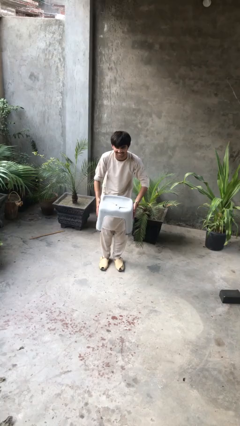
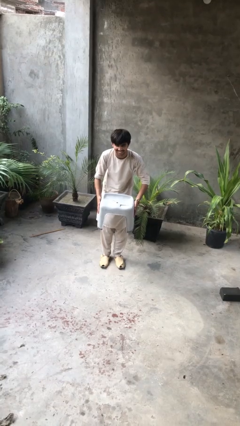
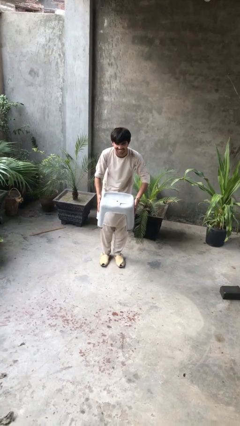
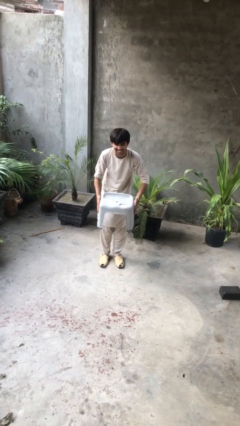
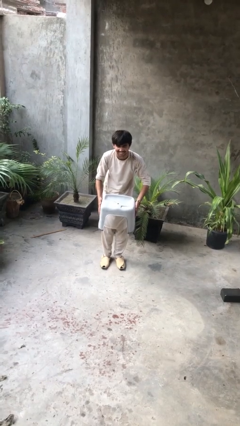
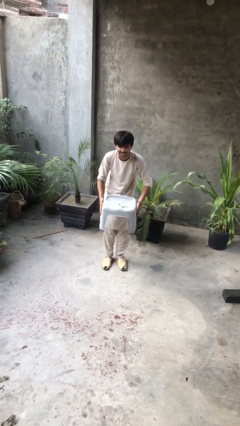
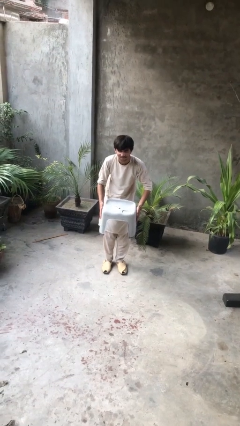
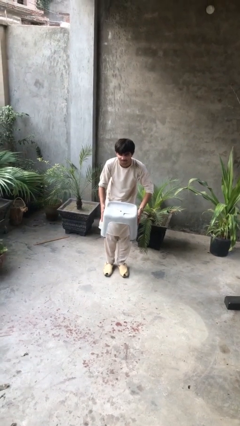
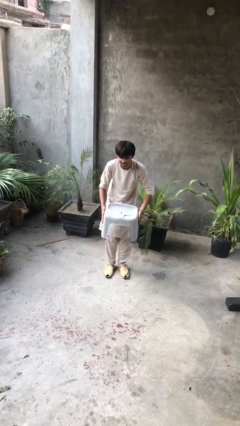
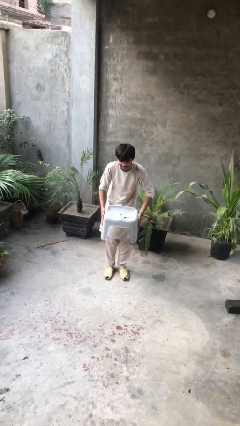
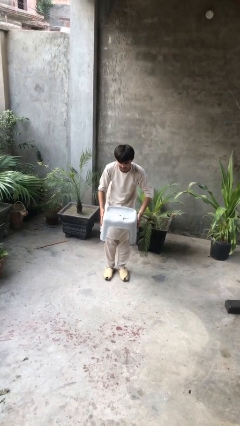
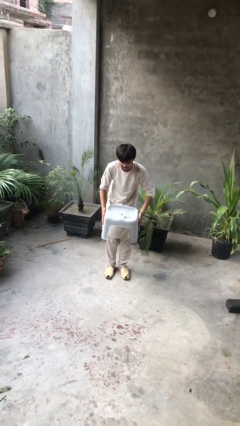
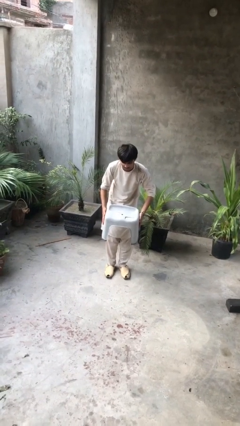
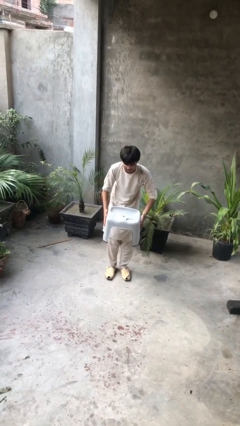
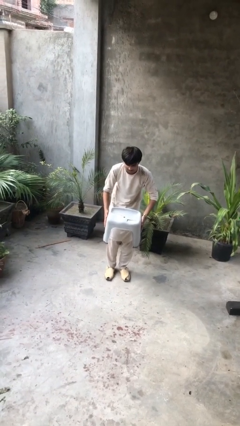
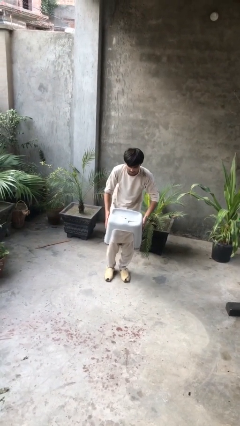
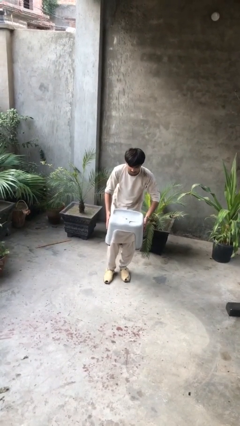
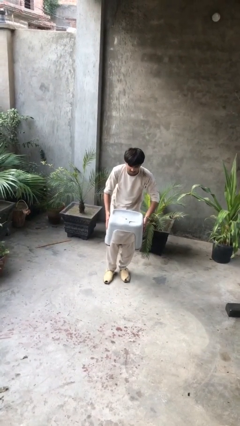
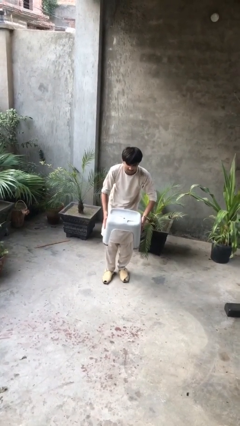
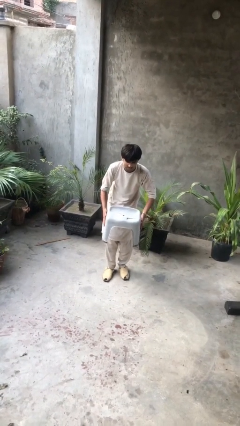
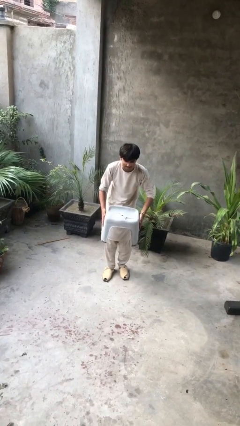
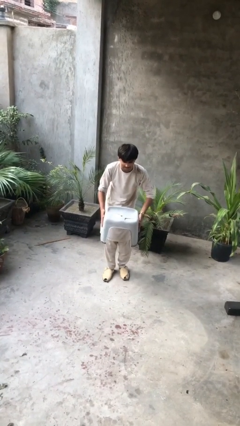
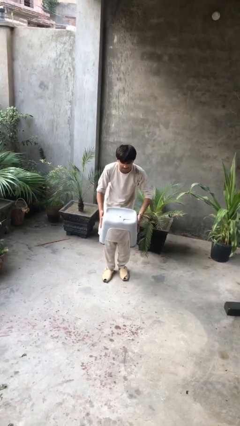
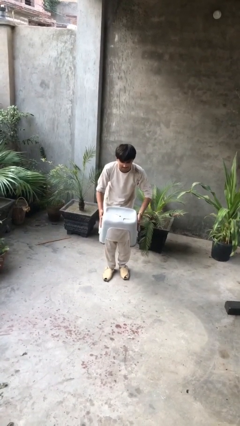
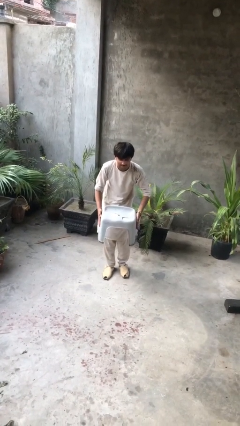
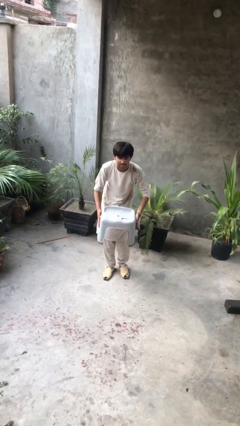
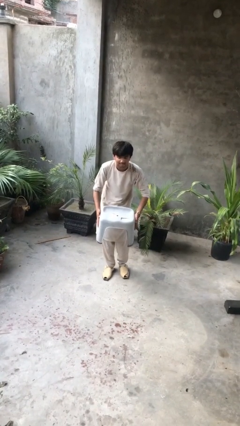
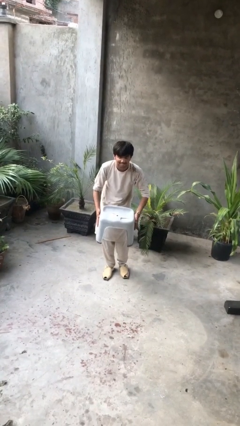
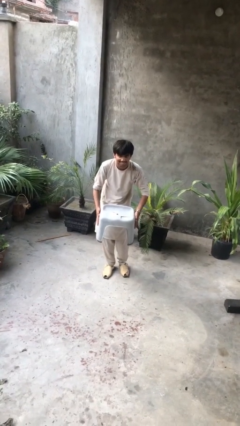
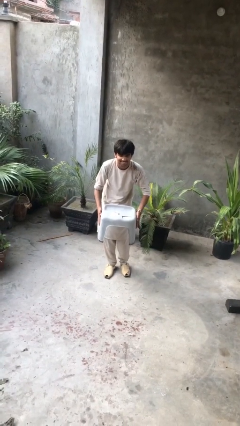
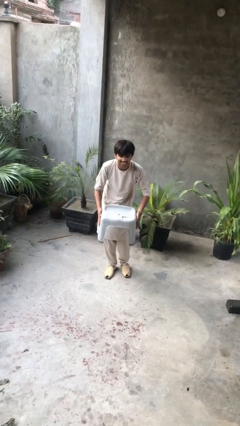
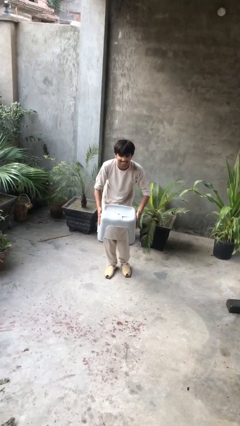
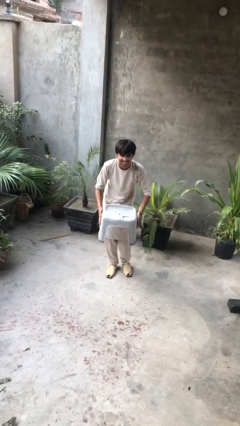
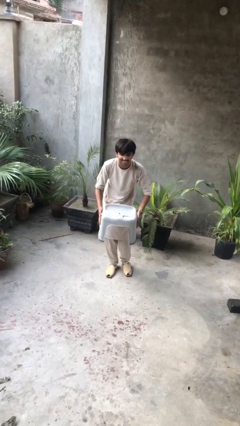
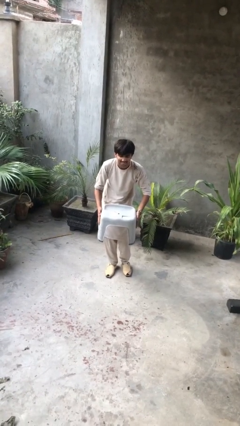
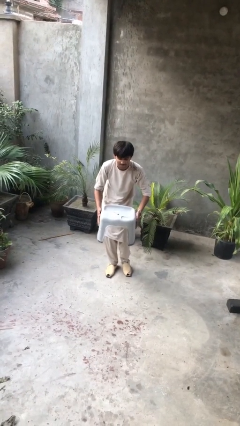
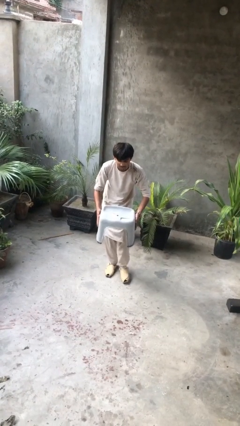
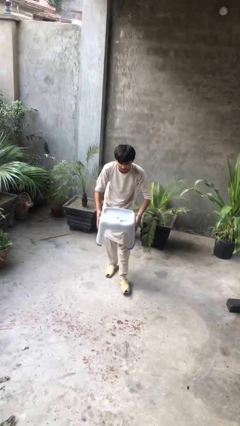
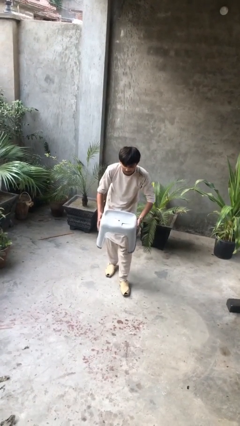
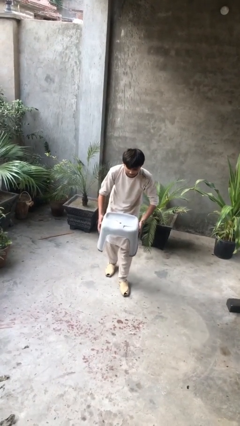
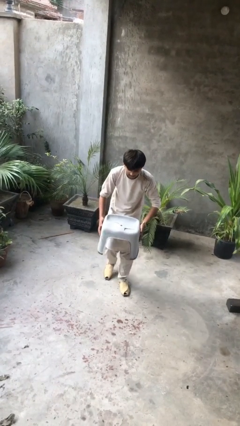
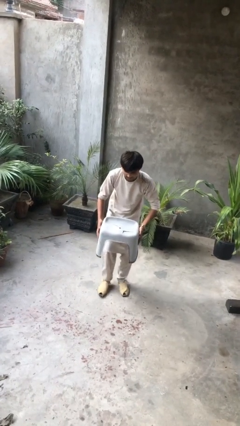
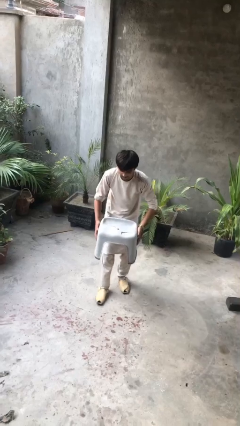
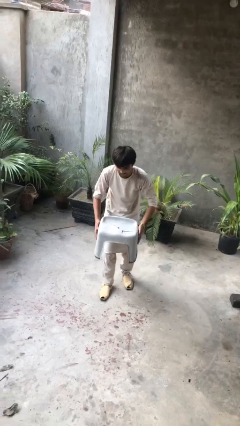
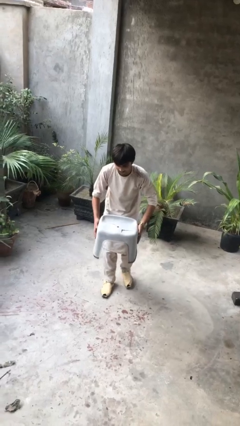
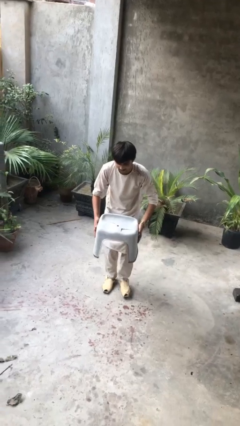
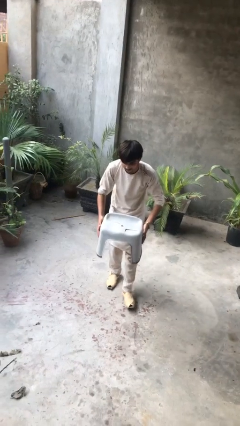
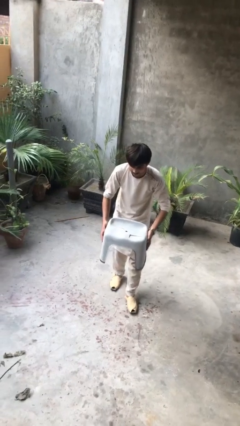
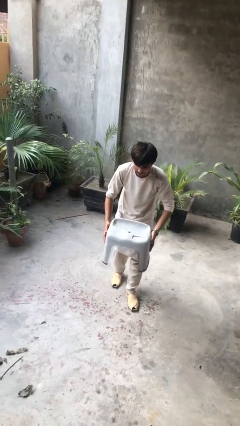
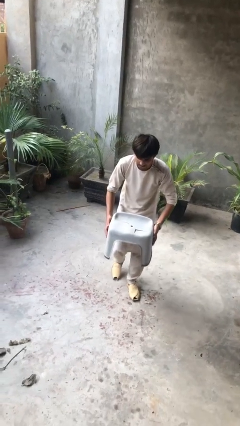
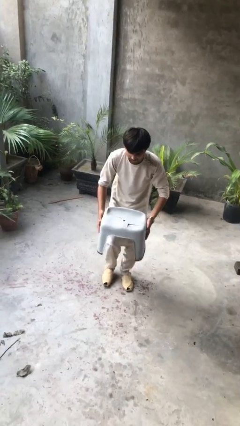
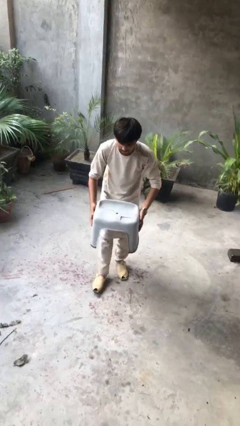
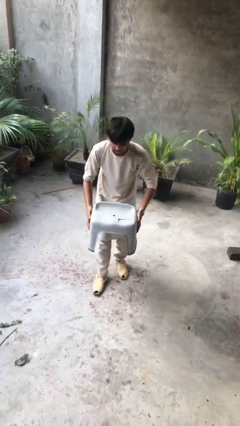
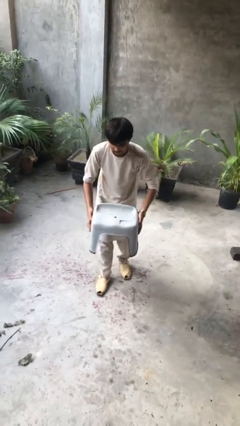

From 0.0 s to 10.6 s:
person carries heavy object

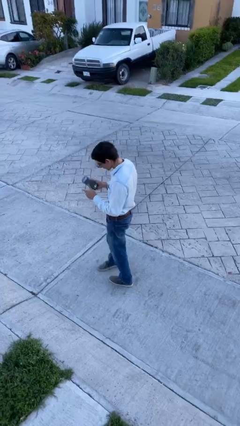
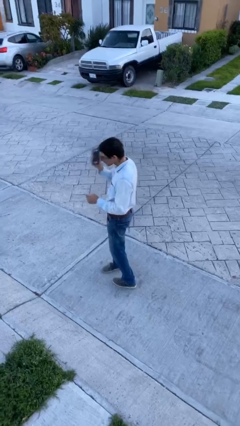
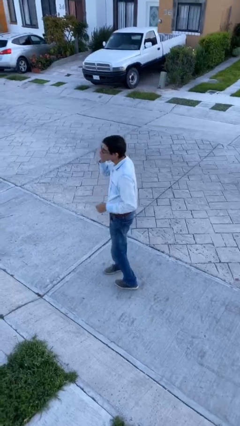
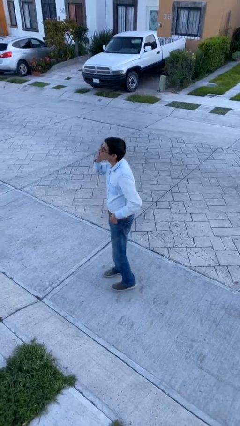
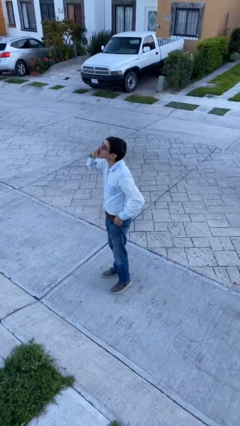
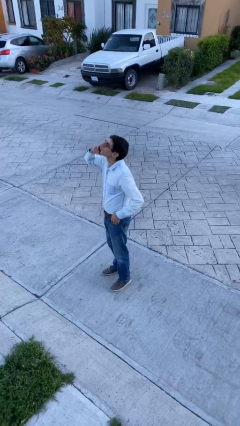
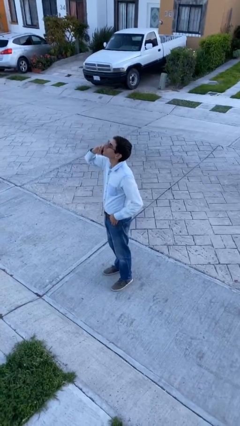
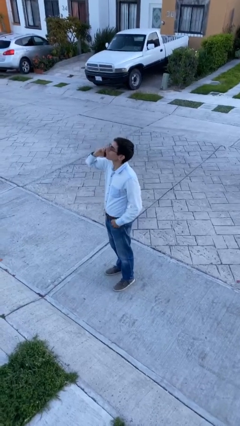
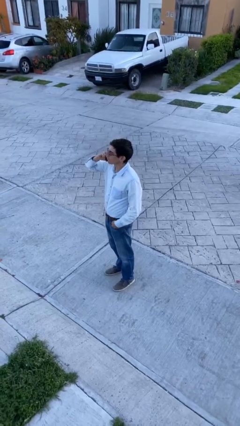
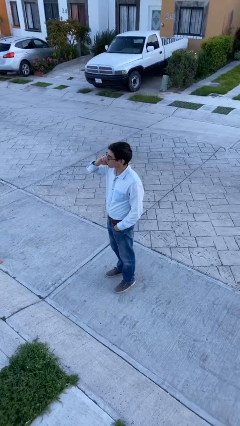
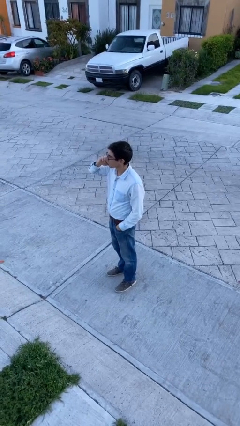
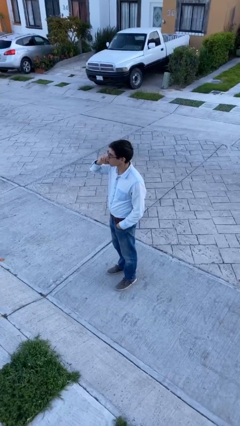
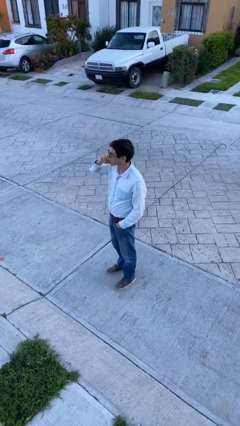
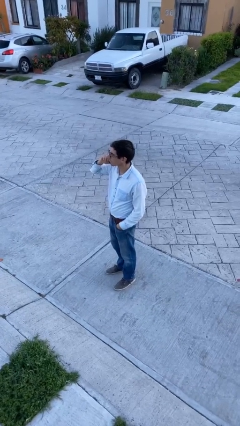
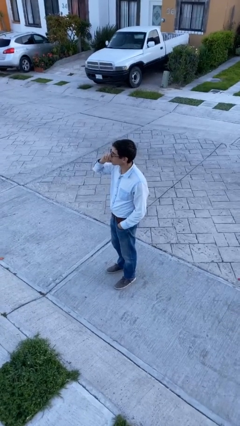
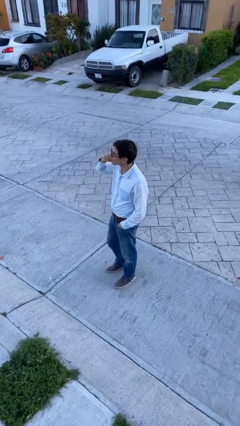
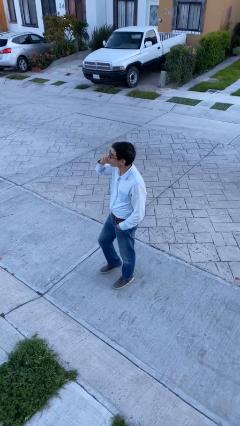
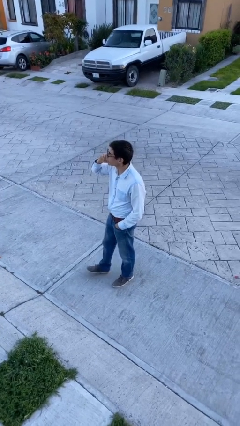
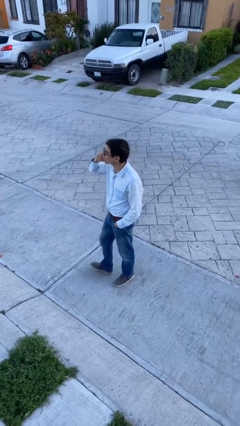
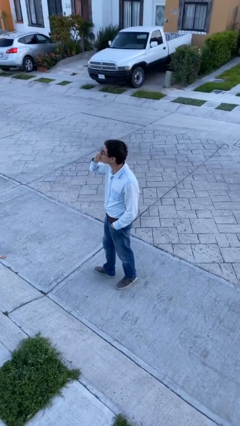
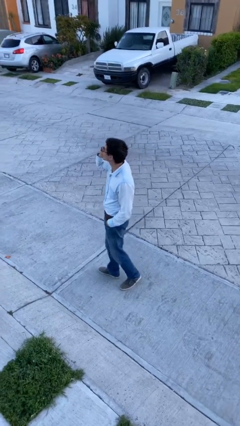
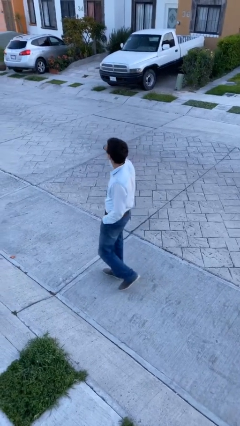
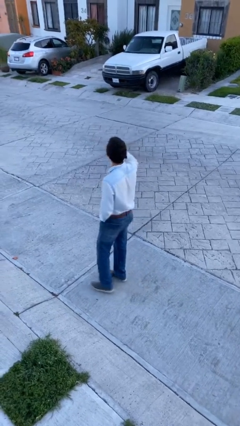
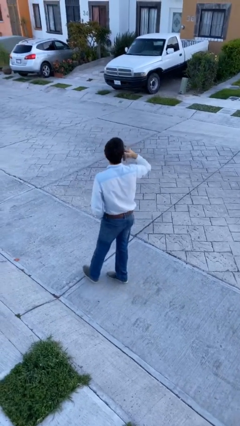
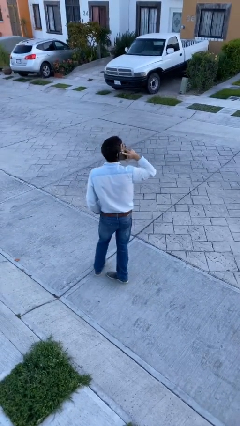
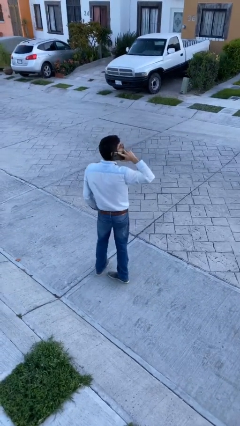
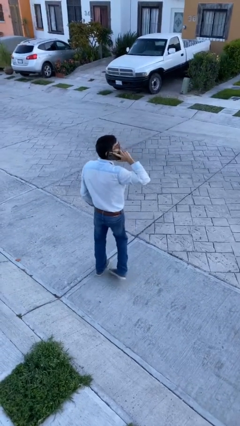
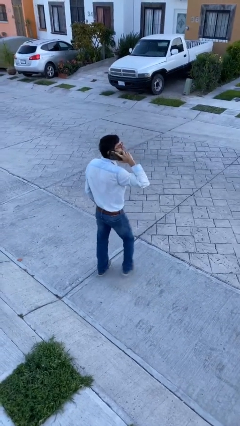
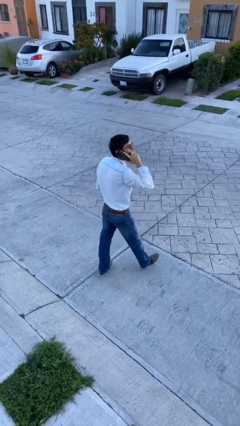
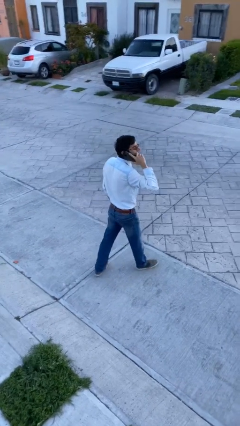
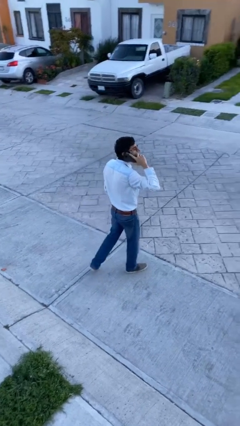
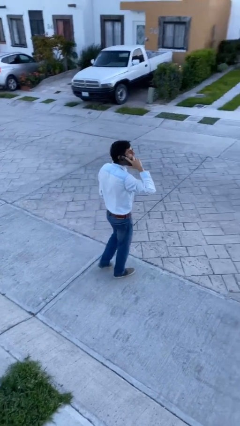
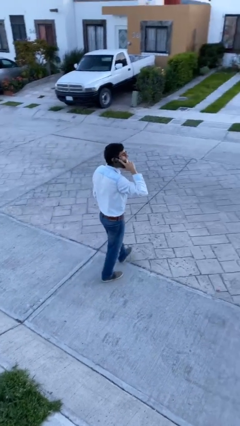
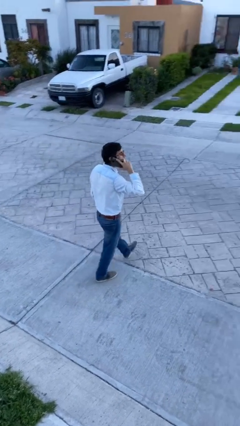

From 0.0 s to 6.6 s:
person talks on phone

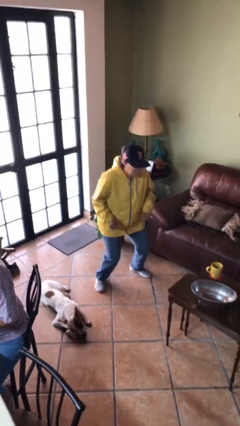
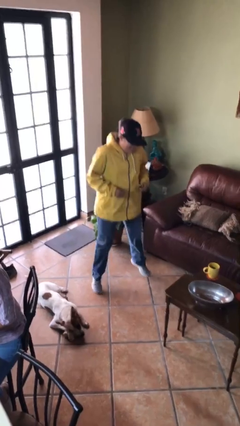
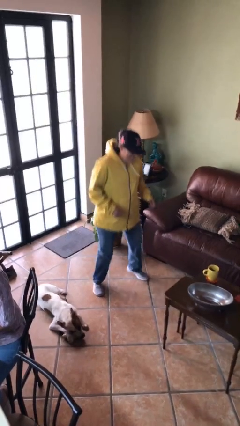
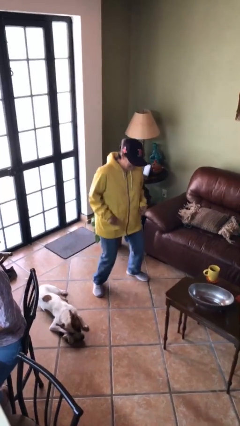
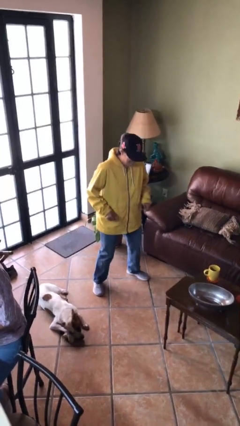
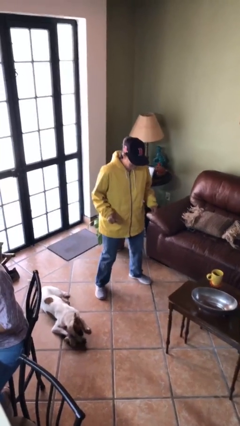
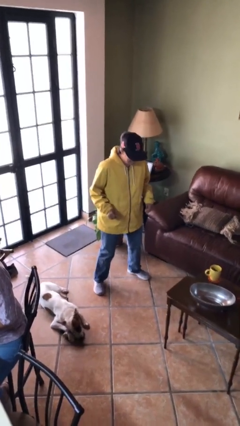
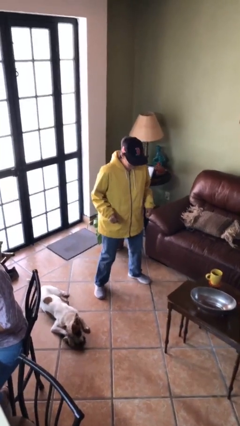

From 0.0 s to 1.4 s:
person jumps
